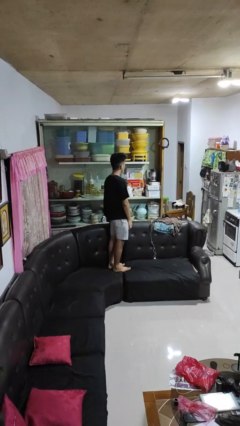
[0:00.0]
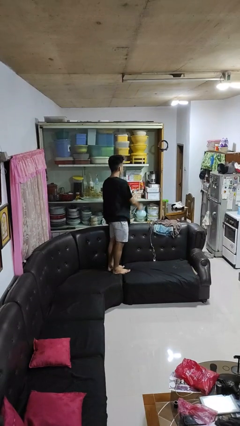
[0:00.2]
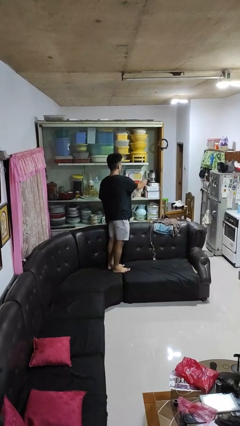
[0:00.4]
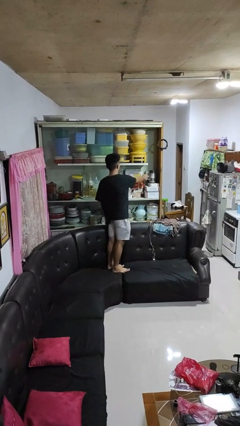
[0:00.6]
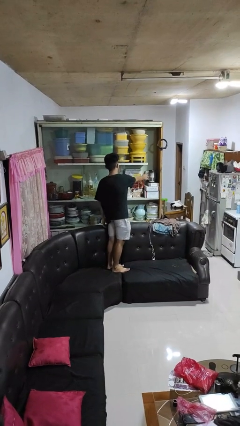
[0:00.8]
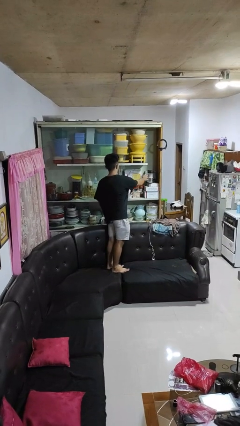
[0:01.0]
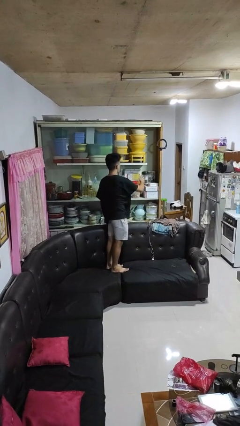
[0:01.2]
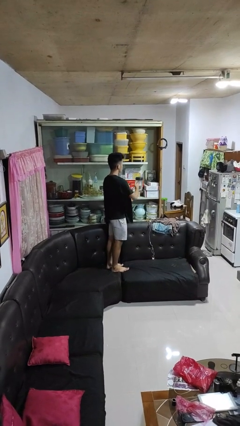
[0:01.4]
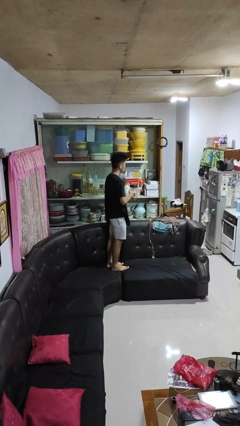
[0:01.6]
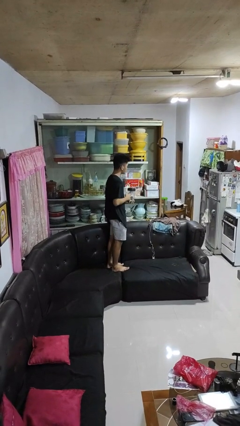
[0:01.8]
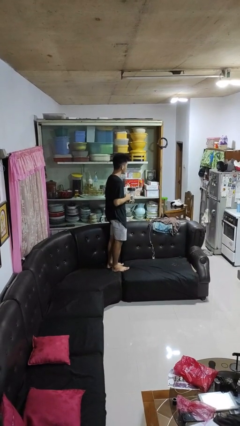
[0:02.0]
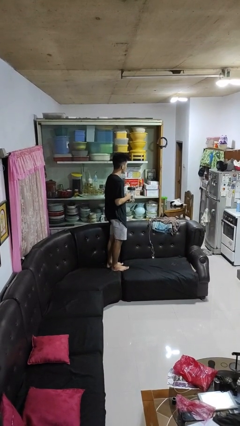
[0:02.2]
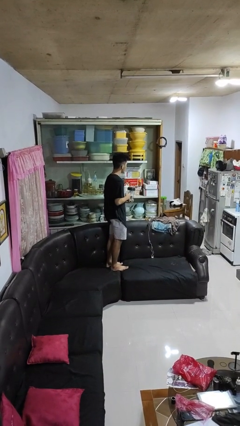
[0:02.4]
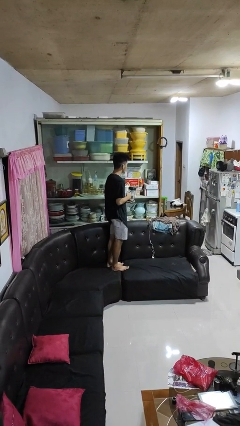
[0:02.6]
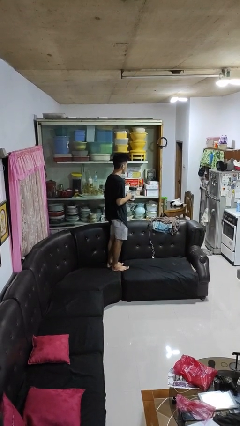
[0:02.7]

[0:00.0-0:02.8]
person picks up object from cabinet

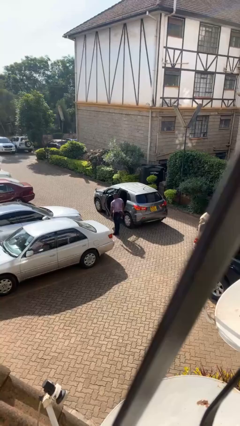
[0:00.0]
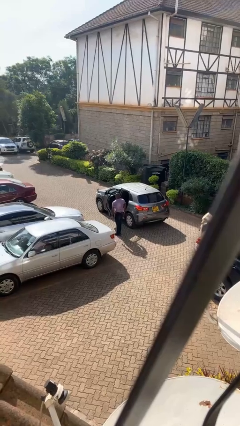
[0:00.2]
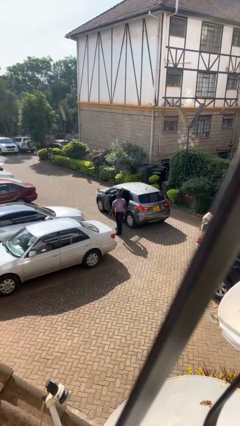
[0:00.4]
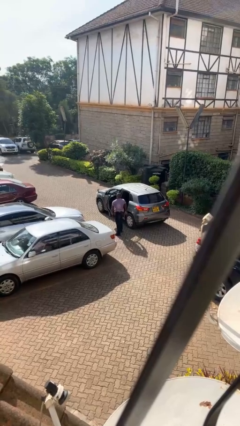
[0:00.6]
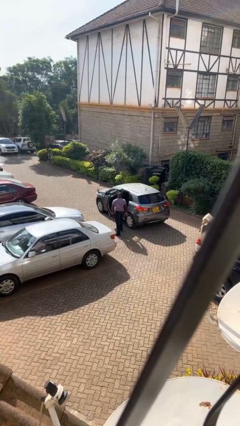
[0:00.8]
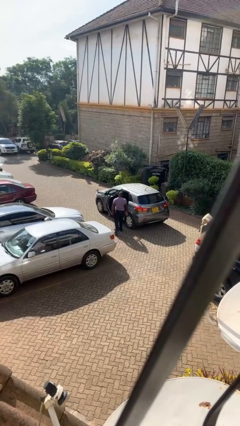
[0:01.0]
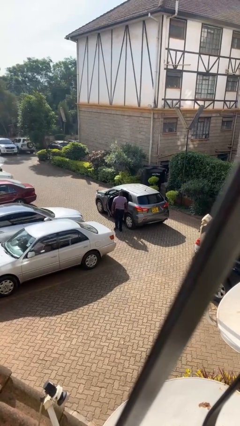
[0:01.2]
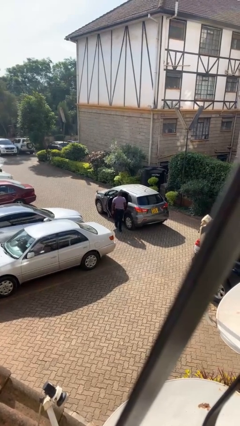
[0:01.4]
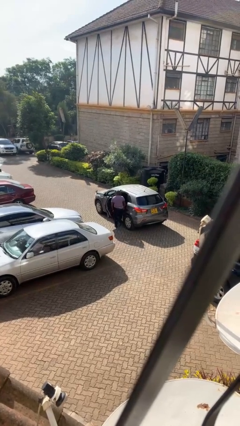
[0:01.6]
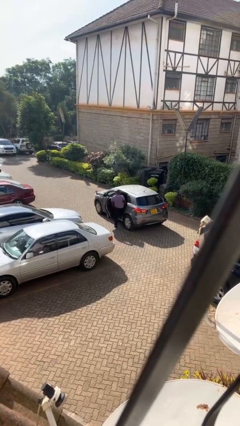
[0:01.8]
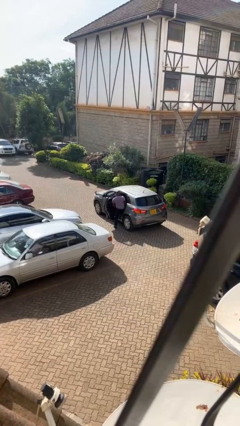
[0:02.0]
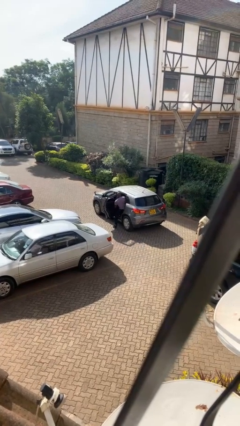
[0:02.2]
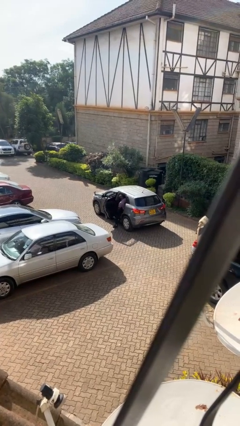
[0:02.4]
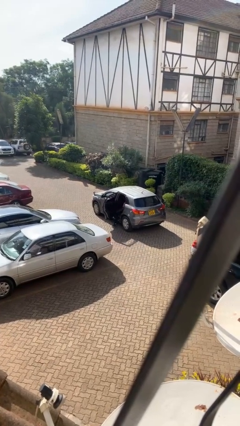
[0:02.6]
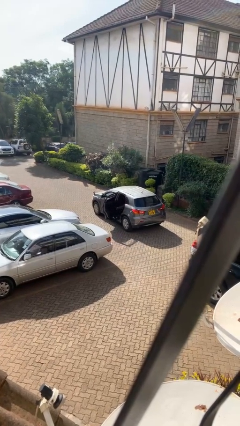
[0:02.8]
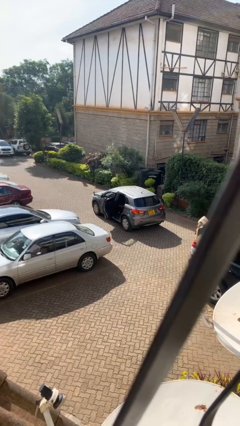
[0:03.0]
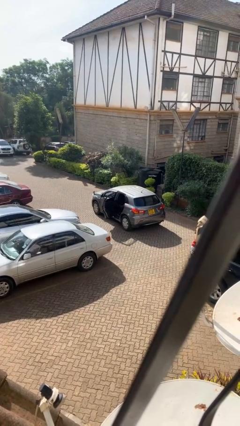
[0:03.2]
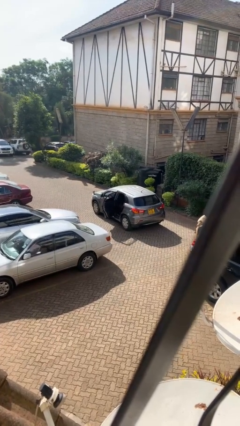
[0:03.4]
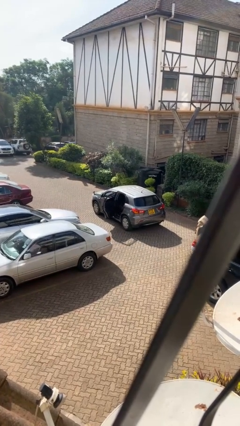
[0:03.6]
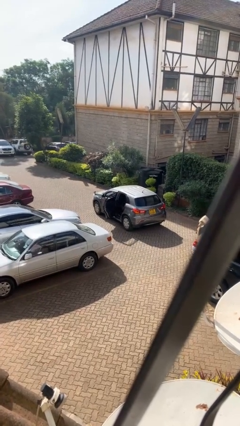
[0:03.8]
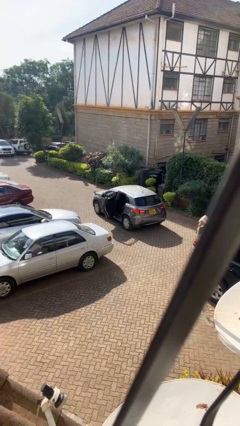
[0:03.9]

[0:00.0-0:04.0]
person enters car

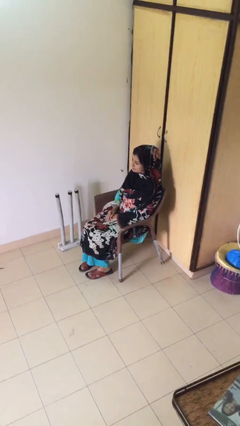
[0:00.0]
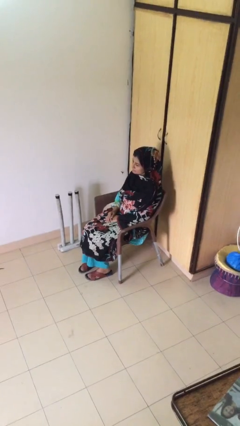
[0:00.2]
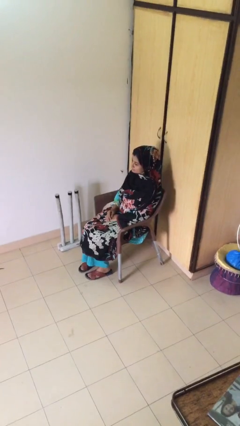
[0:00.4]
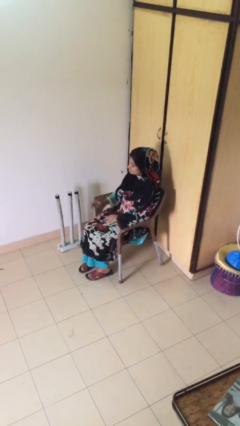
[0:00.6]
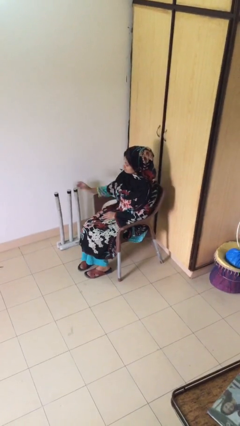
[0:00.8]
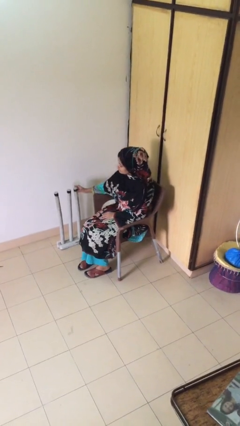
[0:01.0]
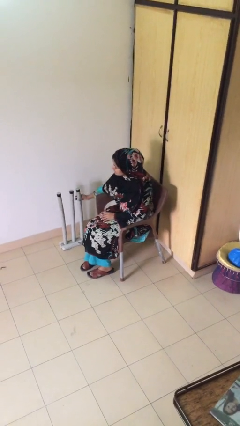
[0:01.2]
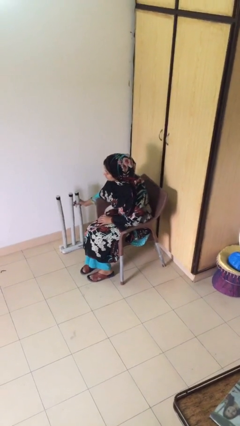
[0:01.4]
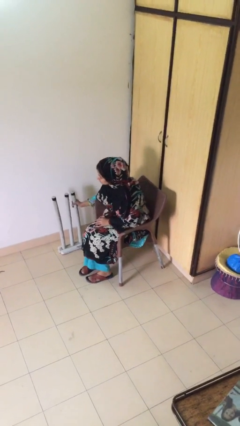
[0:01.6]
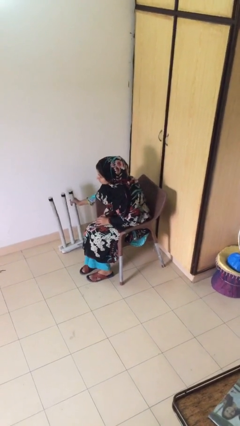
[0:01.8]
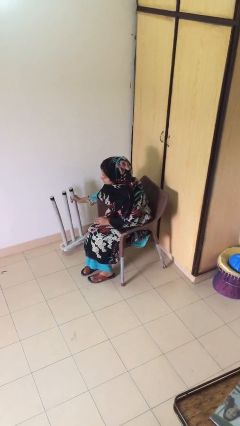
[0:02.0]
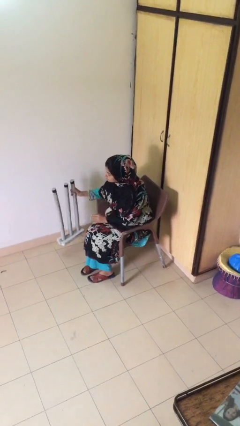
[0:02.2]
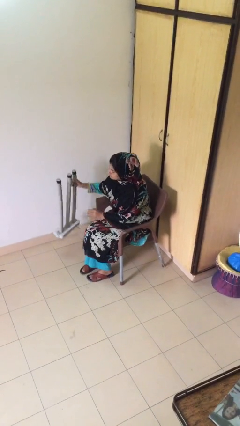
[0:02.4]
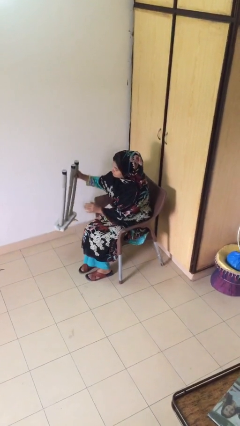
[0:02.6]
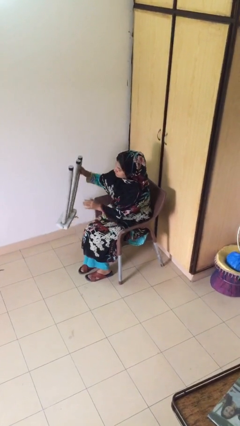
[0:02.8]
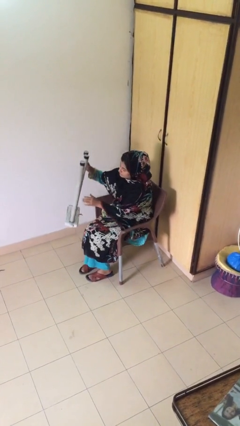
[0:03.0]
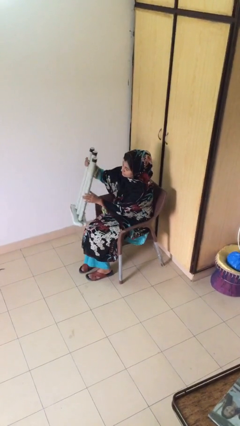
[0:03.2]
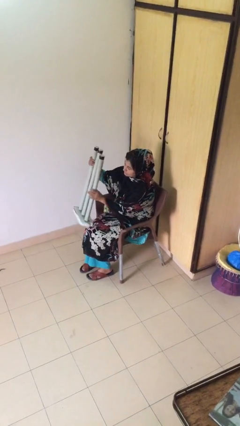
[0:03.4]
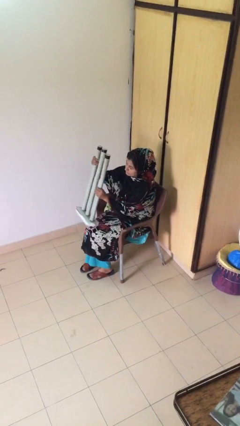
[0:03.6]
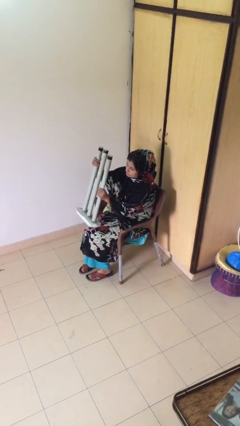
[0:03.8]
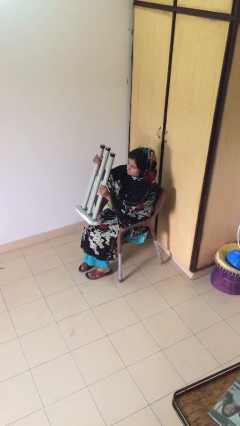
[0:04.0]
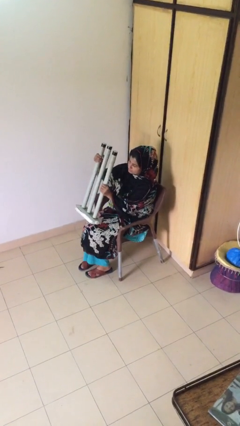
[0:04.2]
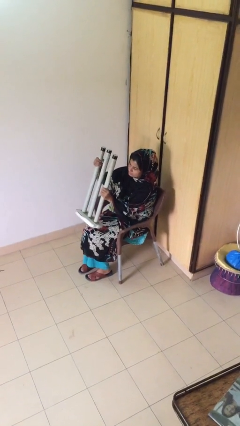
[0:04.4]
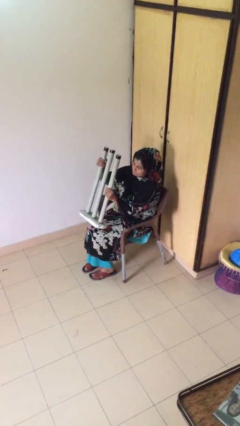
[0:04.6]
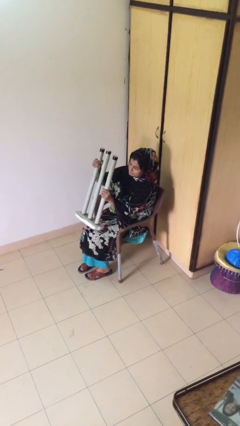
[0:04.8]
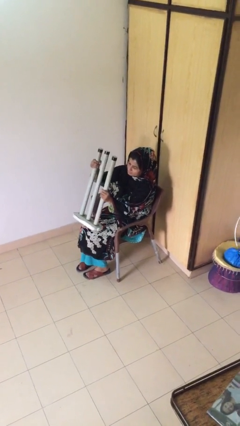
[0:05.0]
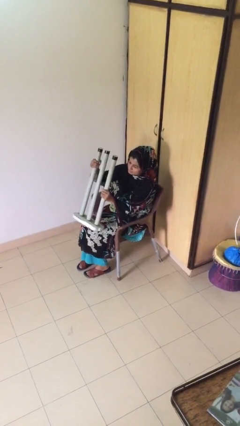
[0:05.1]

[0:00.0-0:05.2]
person picks up object from floor

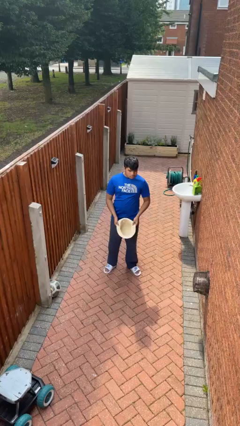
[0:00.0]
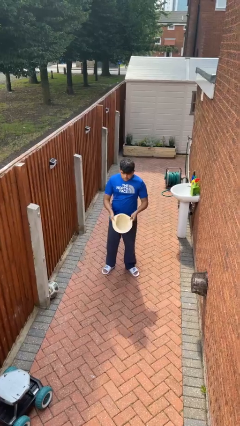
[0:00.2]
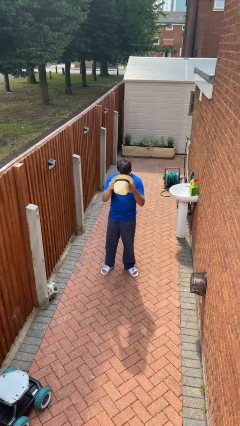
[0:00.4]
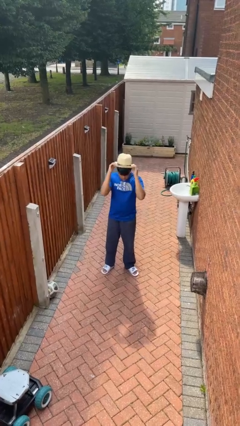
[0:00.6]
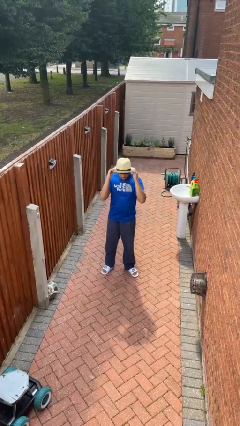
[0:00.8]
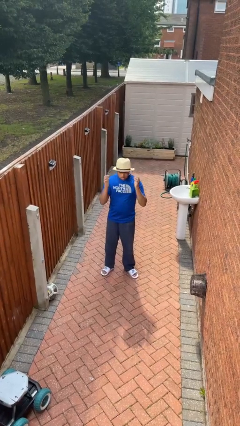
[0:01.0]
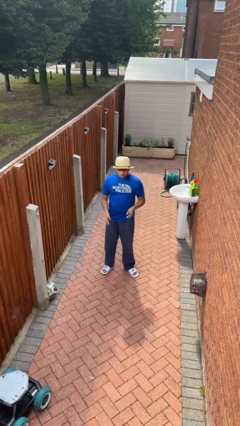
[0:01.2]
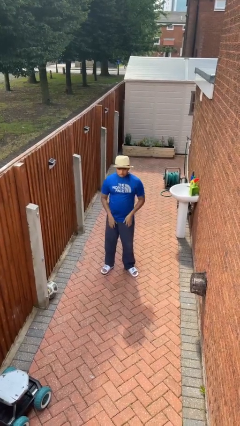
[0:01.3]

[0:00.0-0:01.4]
person puts on hat

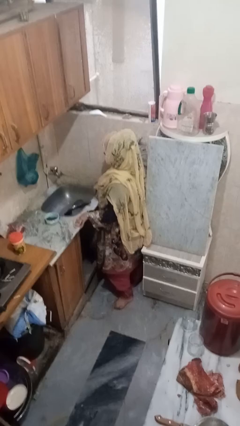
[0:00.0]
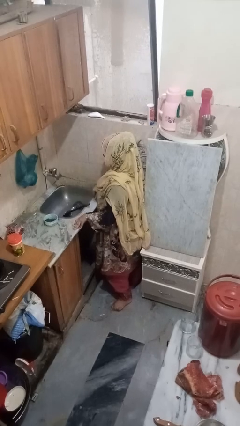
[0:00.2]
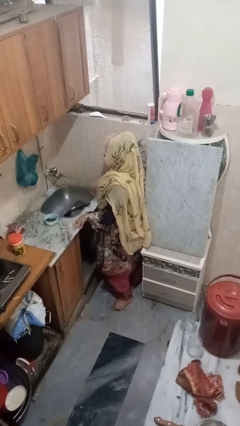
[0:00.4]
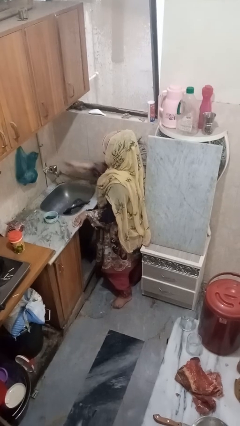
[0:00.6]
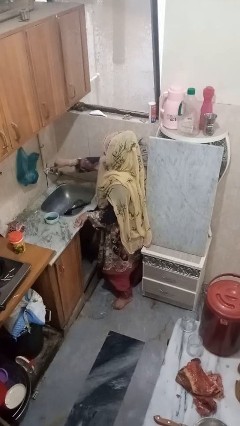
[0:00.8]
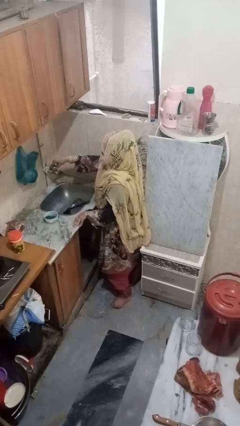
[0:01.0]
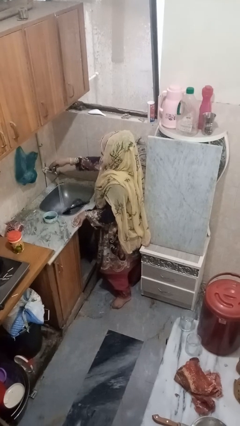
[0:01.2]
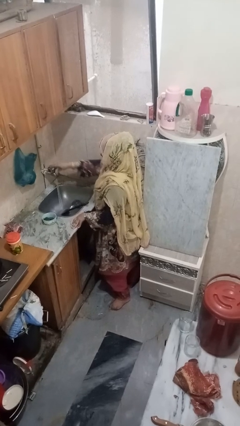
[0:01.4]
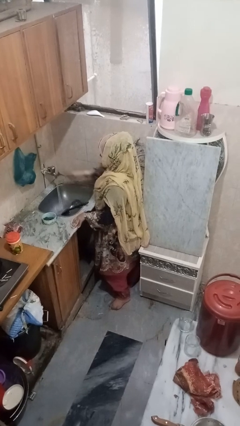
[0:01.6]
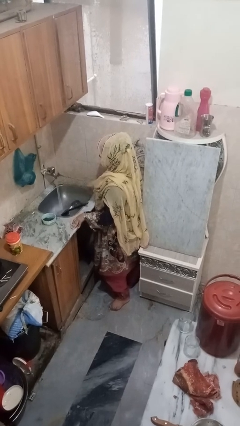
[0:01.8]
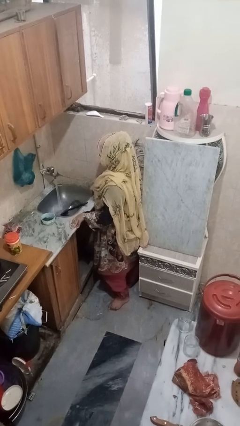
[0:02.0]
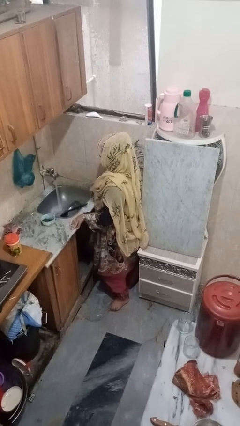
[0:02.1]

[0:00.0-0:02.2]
person turns on faucet

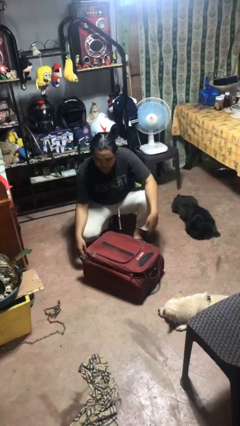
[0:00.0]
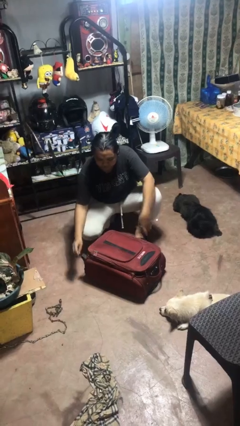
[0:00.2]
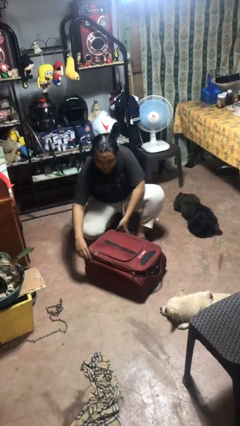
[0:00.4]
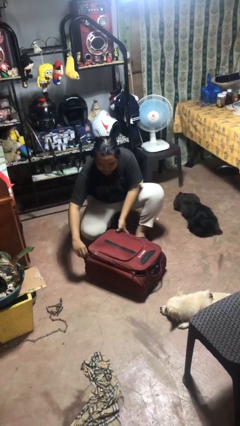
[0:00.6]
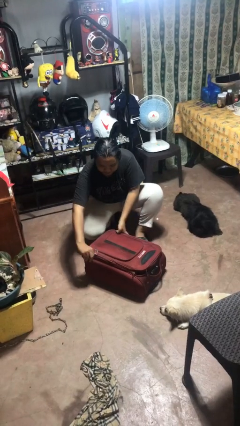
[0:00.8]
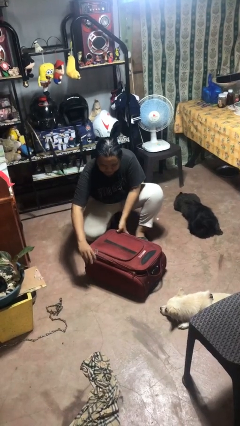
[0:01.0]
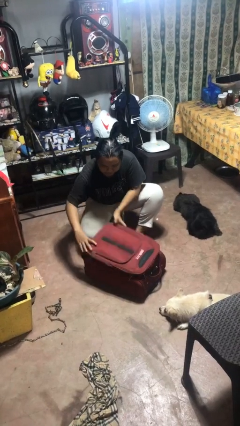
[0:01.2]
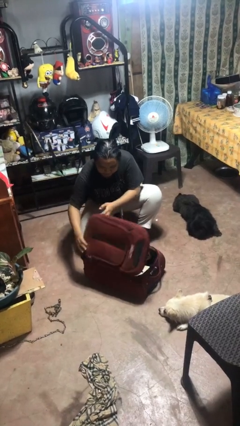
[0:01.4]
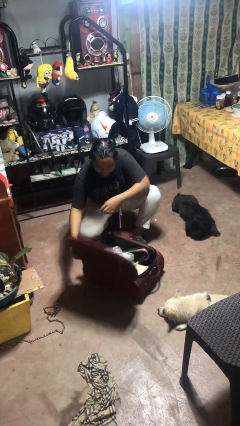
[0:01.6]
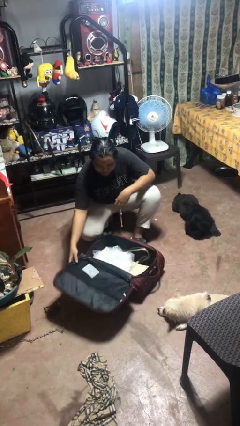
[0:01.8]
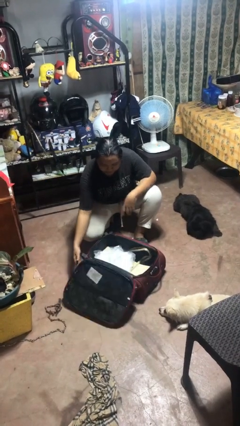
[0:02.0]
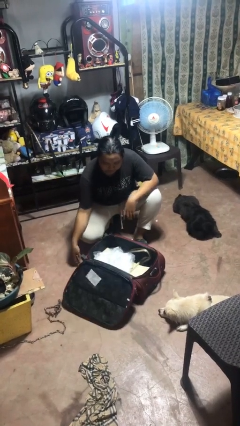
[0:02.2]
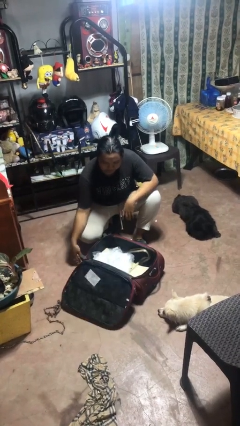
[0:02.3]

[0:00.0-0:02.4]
person opens suitcase
